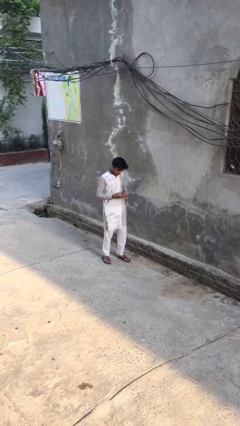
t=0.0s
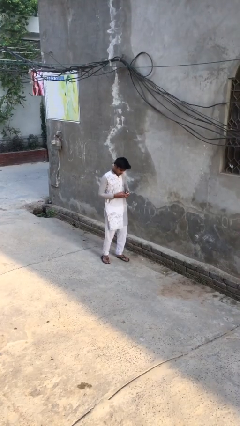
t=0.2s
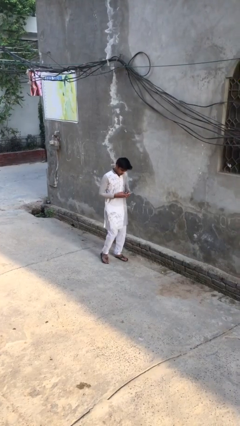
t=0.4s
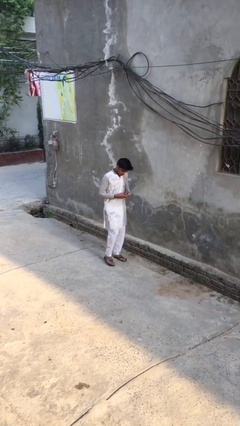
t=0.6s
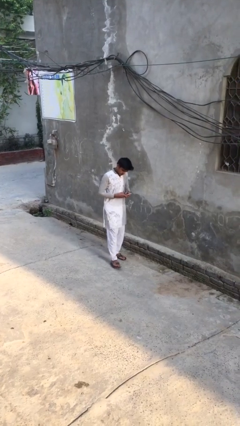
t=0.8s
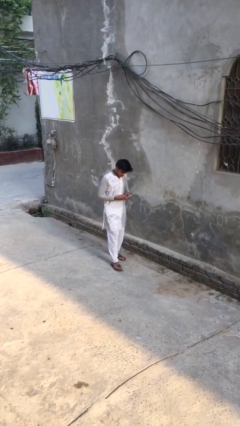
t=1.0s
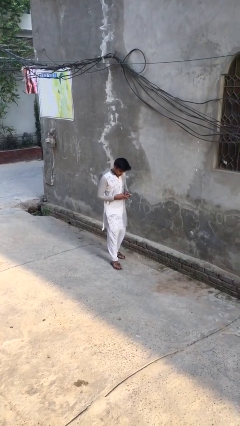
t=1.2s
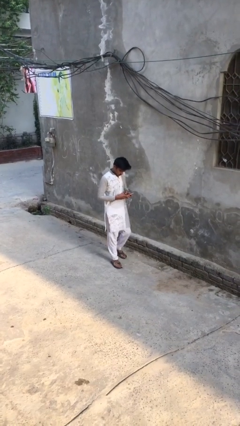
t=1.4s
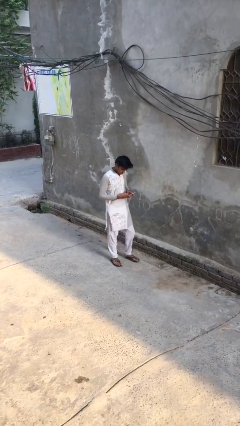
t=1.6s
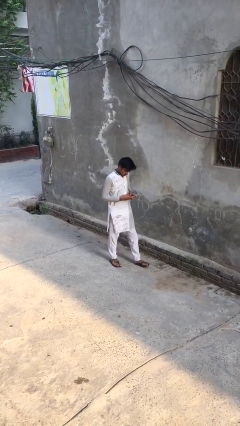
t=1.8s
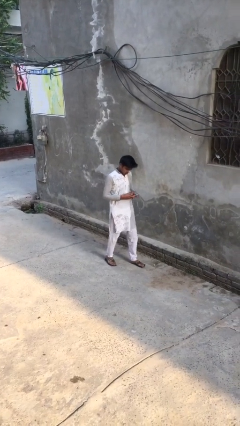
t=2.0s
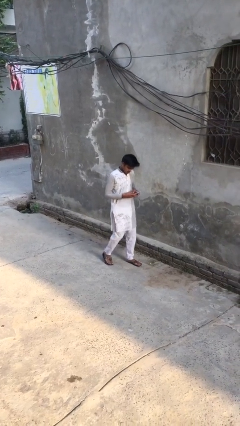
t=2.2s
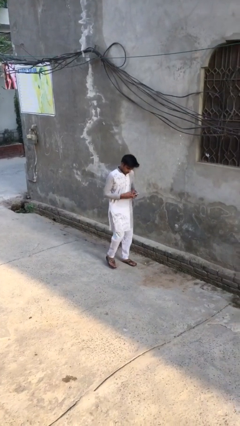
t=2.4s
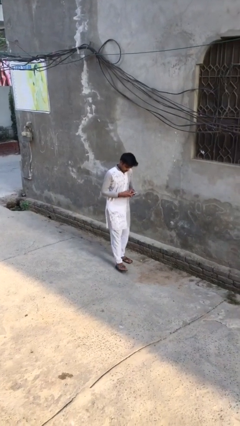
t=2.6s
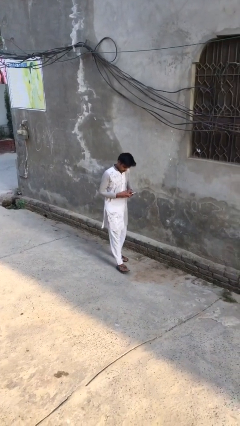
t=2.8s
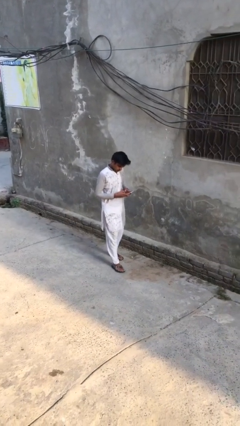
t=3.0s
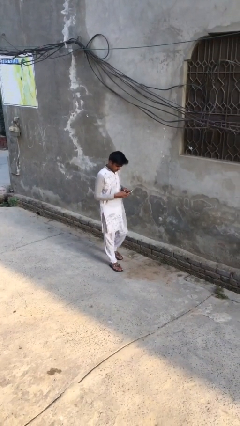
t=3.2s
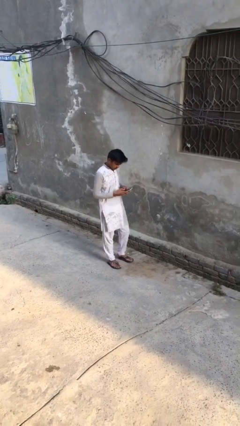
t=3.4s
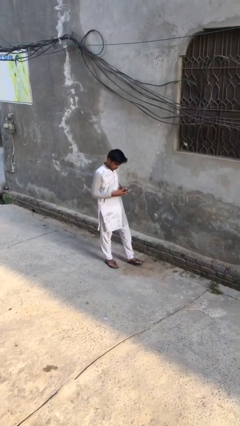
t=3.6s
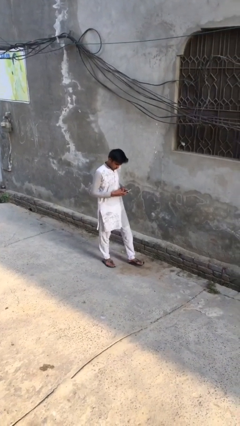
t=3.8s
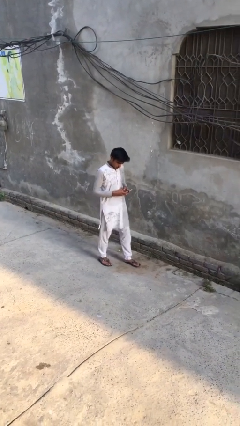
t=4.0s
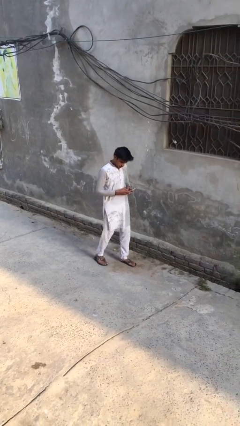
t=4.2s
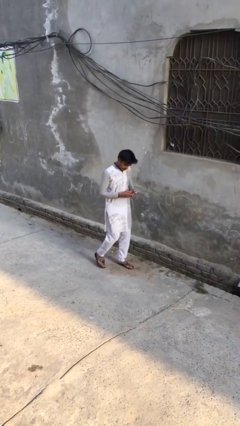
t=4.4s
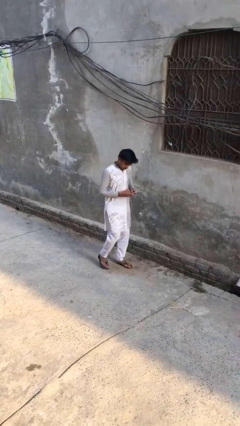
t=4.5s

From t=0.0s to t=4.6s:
person texts on phone

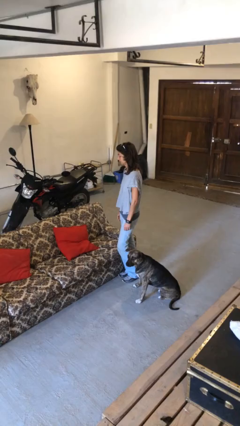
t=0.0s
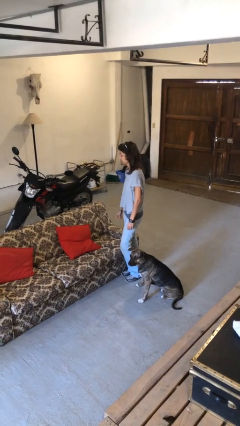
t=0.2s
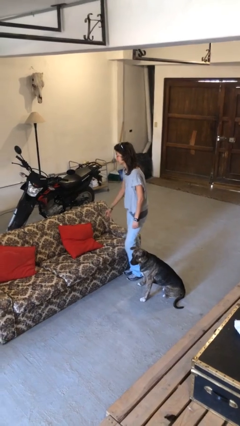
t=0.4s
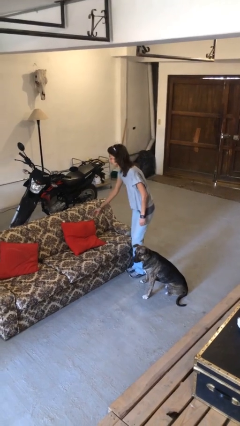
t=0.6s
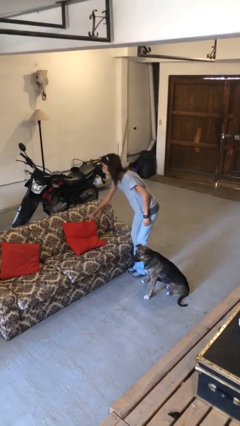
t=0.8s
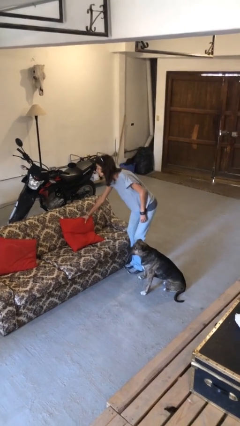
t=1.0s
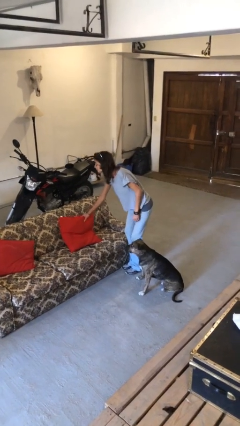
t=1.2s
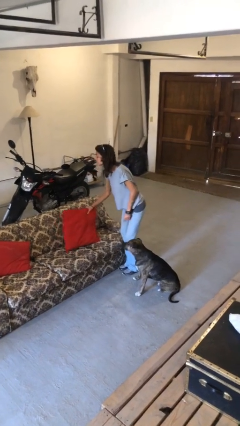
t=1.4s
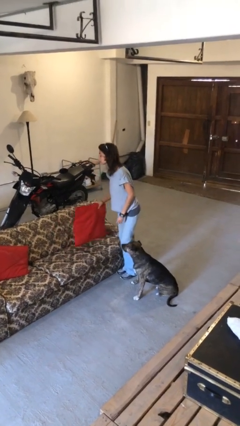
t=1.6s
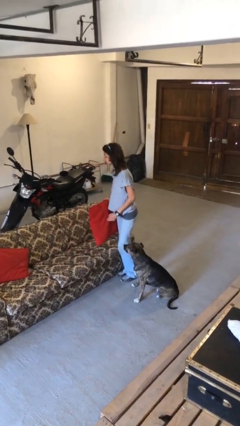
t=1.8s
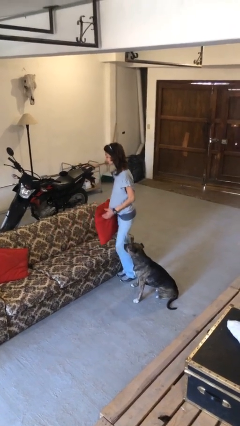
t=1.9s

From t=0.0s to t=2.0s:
person picks up object from couch

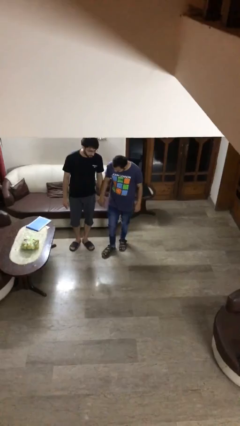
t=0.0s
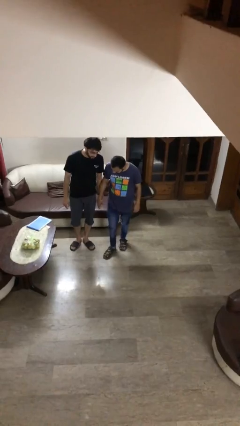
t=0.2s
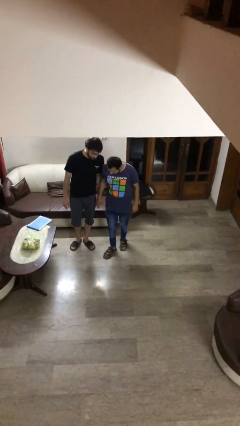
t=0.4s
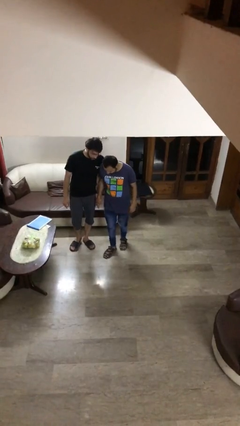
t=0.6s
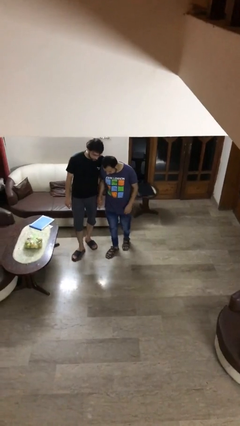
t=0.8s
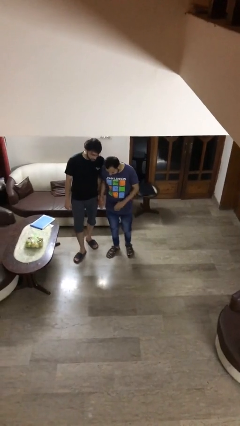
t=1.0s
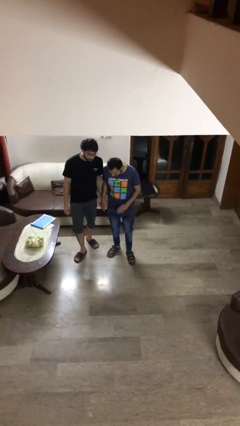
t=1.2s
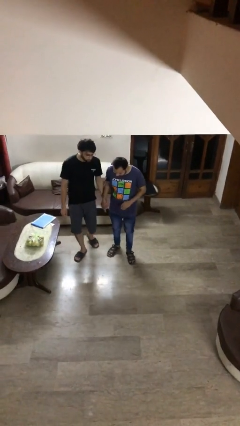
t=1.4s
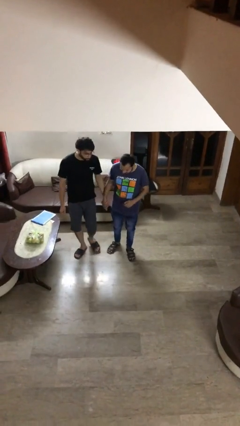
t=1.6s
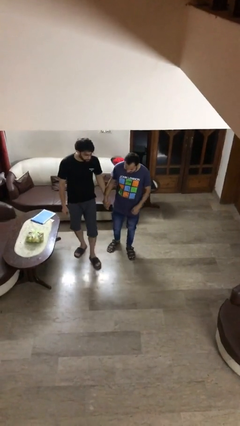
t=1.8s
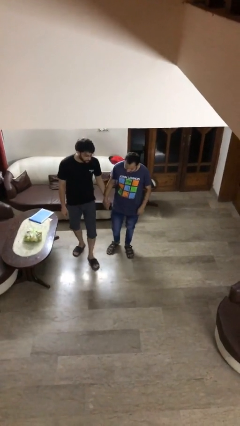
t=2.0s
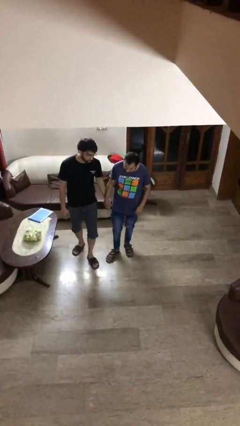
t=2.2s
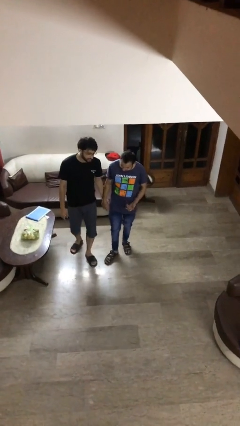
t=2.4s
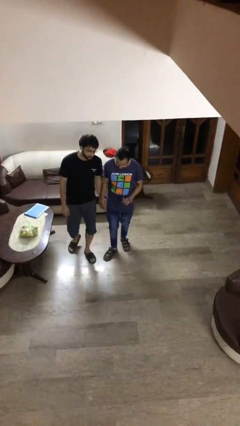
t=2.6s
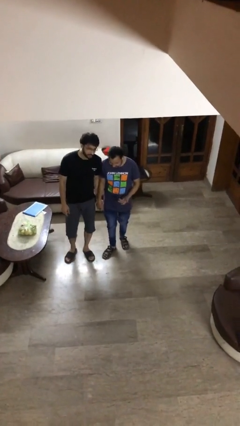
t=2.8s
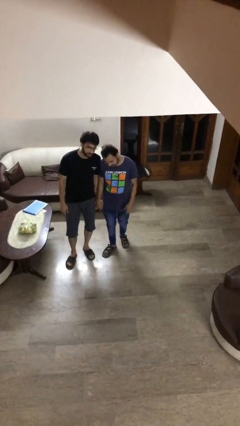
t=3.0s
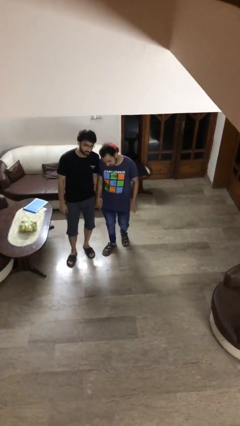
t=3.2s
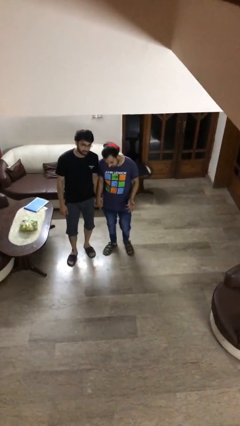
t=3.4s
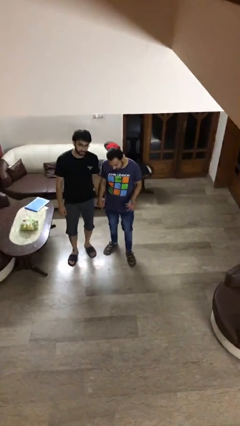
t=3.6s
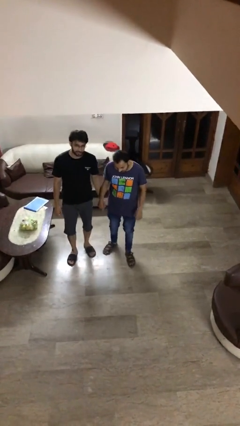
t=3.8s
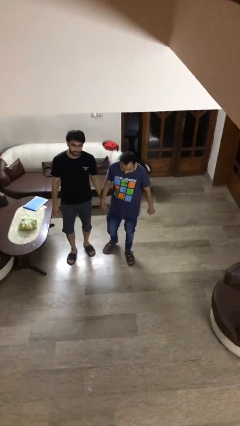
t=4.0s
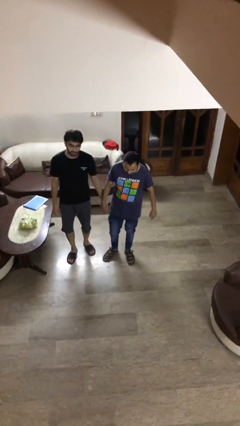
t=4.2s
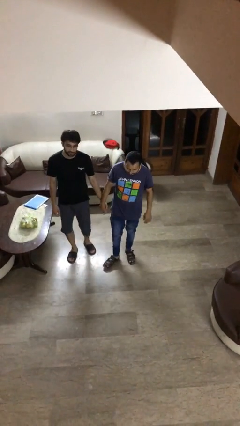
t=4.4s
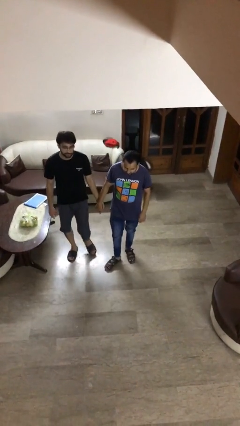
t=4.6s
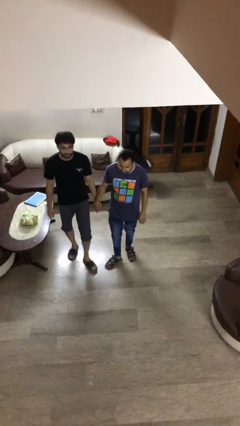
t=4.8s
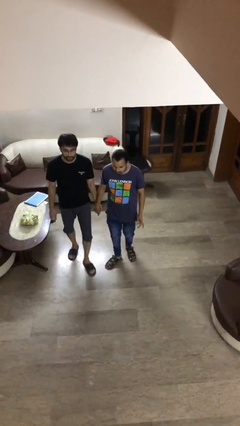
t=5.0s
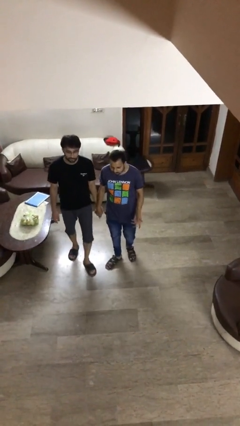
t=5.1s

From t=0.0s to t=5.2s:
person holds hand

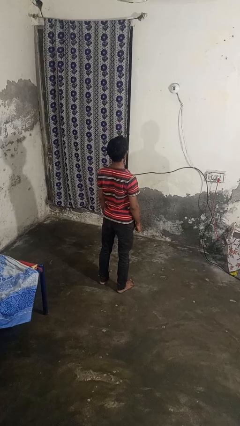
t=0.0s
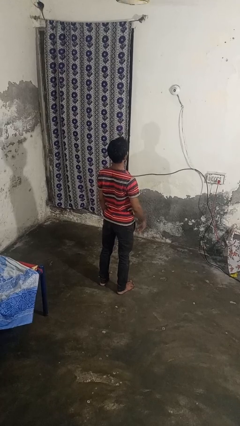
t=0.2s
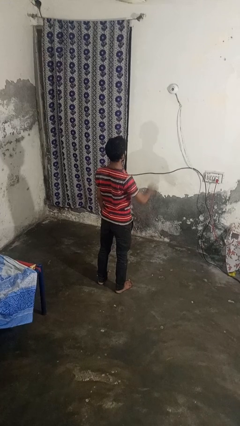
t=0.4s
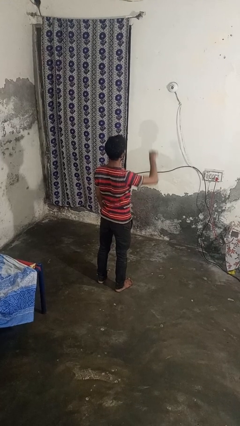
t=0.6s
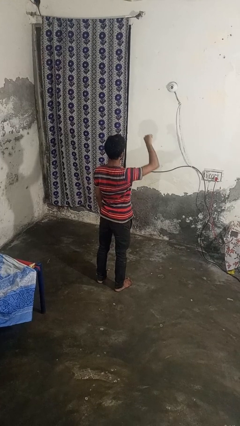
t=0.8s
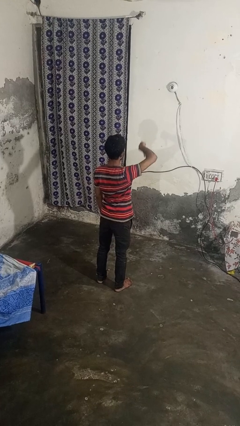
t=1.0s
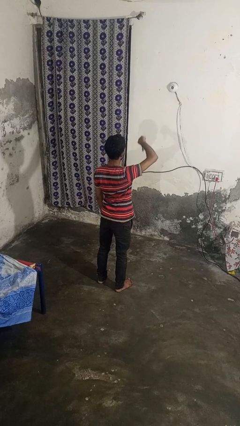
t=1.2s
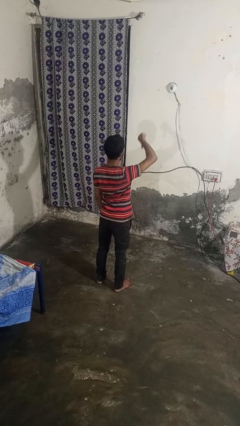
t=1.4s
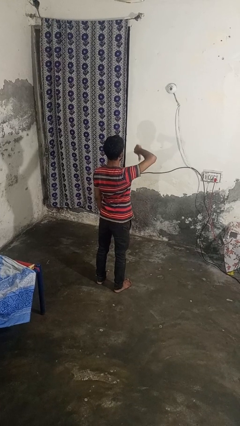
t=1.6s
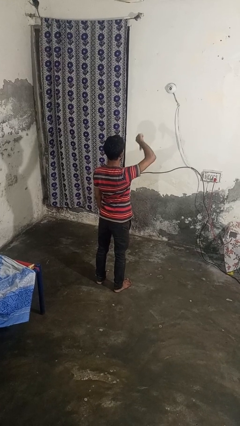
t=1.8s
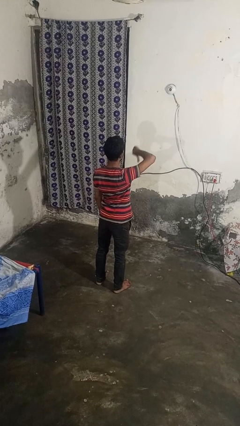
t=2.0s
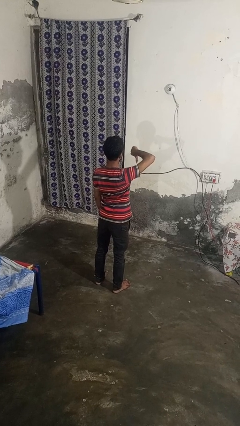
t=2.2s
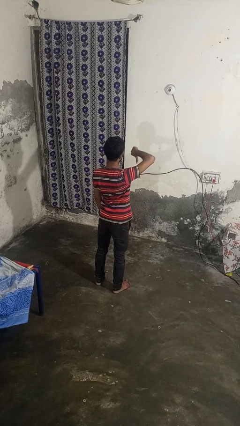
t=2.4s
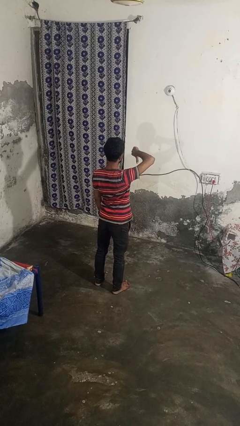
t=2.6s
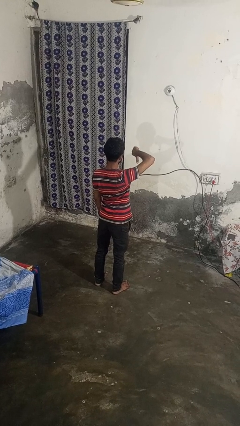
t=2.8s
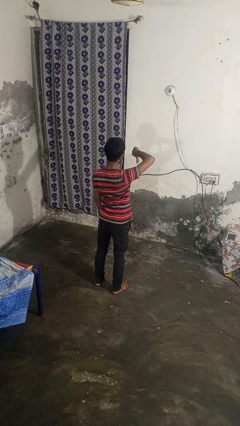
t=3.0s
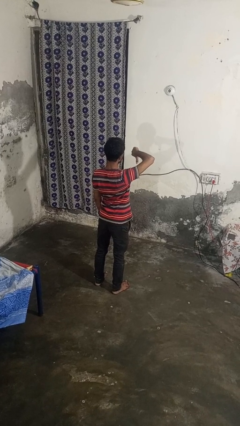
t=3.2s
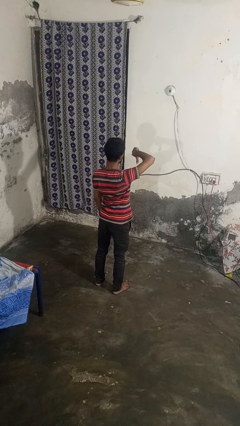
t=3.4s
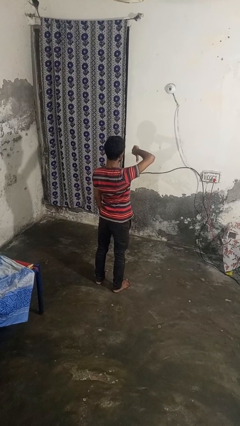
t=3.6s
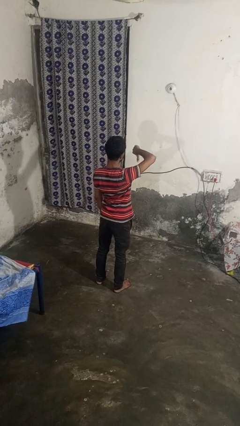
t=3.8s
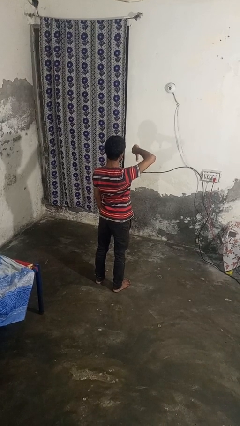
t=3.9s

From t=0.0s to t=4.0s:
person gestures thumbs down

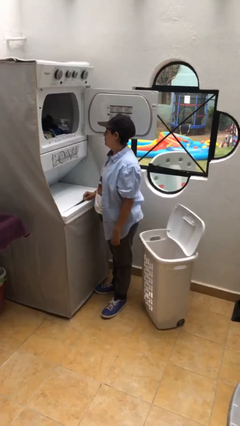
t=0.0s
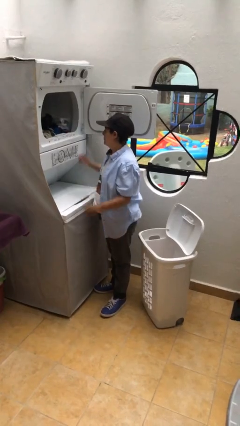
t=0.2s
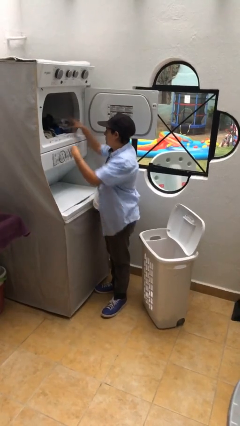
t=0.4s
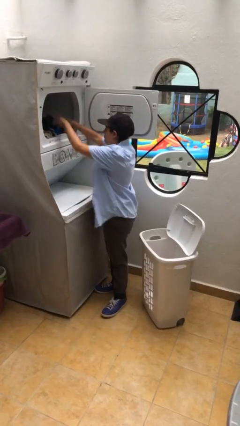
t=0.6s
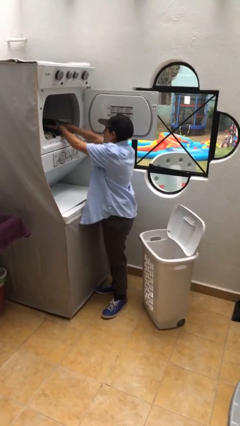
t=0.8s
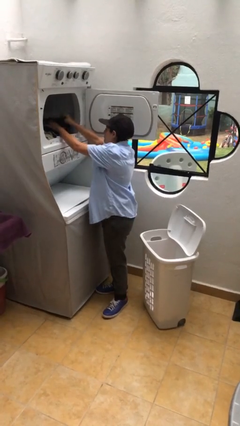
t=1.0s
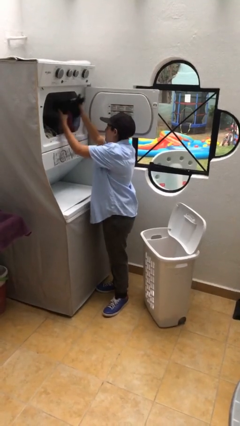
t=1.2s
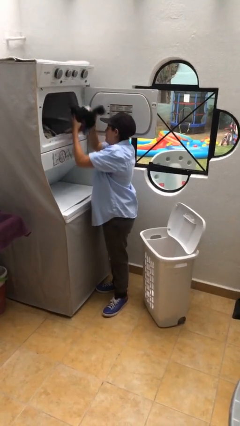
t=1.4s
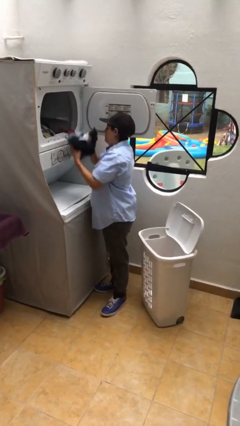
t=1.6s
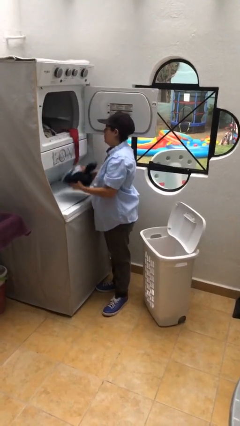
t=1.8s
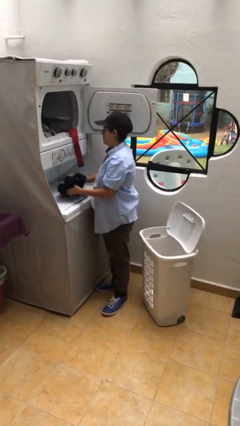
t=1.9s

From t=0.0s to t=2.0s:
person unloads dryer
